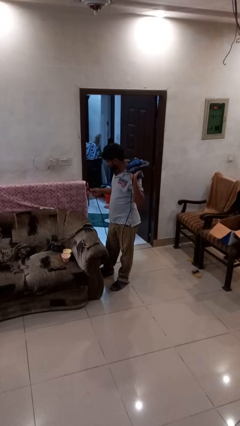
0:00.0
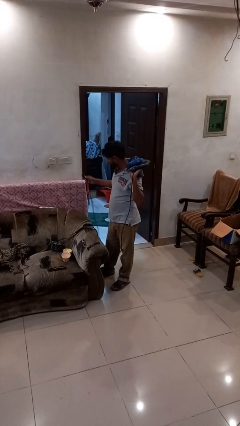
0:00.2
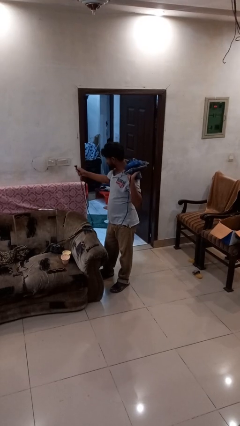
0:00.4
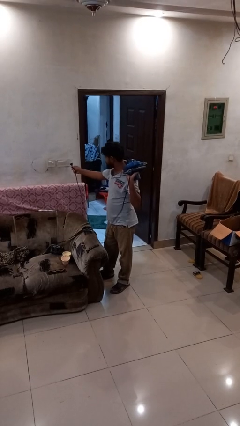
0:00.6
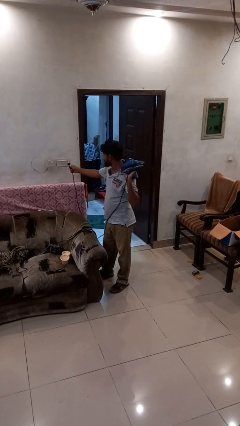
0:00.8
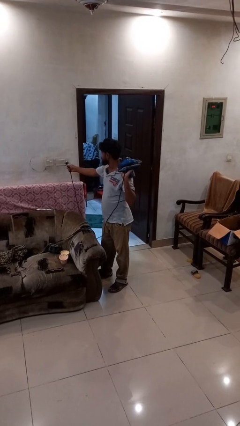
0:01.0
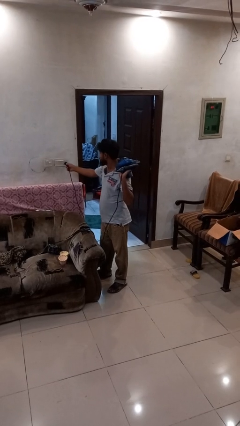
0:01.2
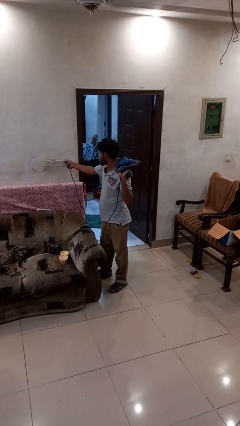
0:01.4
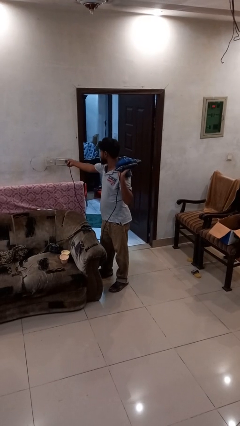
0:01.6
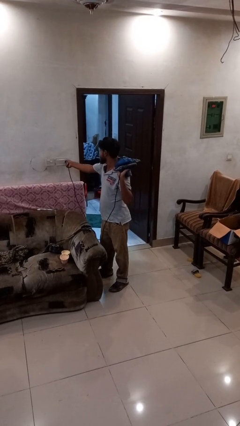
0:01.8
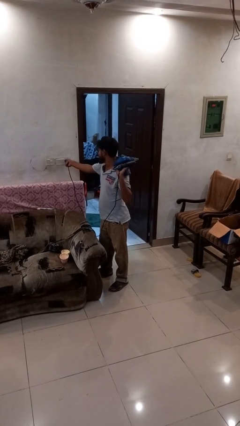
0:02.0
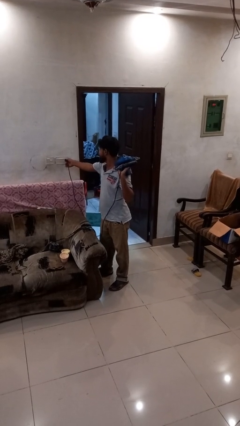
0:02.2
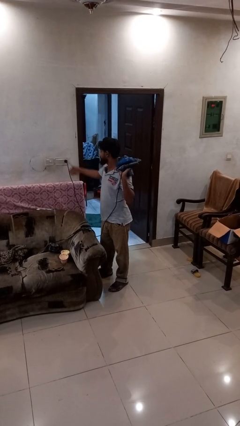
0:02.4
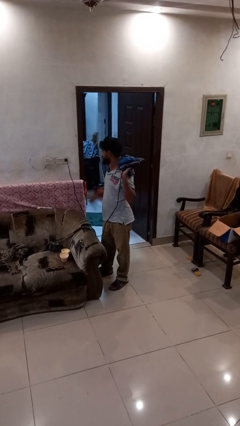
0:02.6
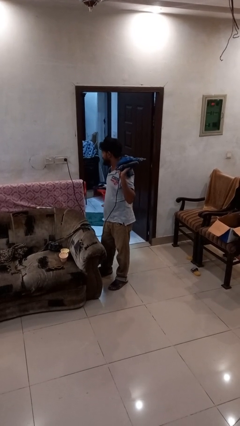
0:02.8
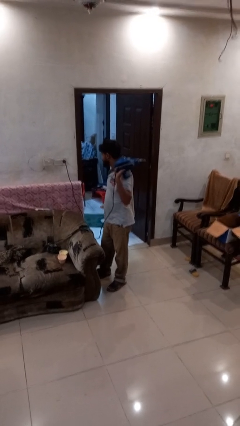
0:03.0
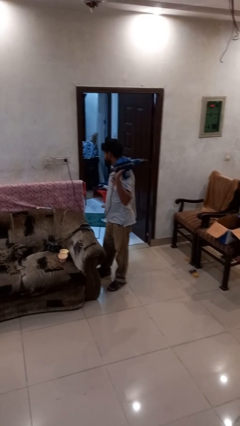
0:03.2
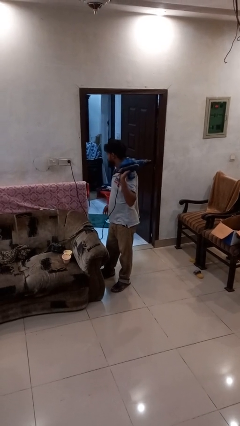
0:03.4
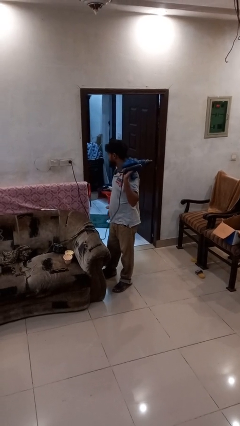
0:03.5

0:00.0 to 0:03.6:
person plugs into electrical socket

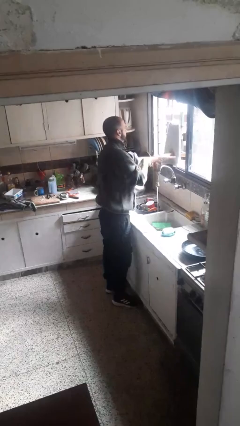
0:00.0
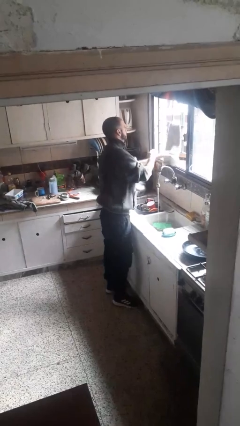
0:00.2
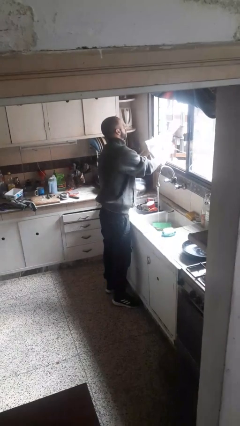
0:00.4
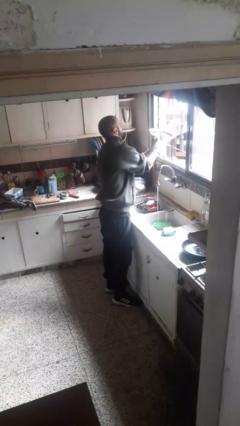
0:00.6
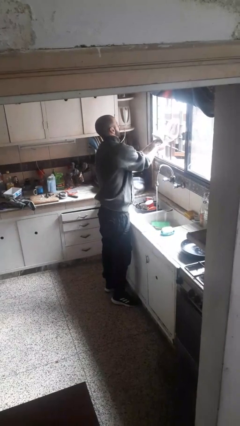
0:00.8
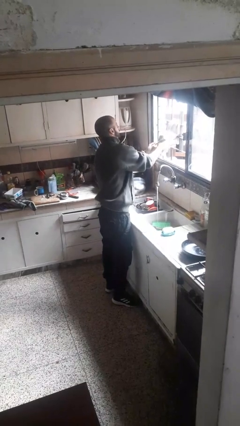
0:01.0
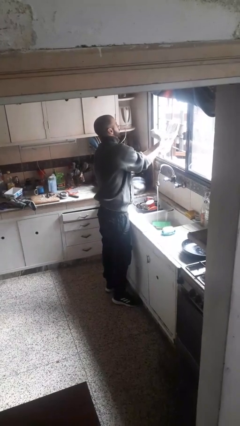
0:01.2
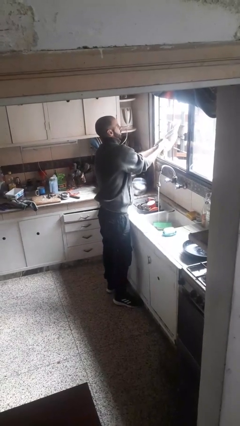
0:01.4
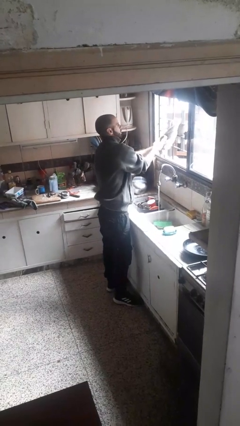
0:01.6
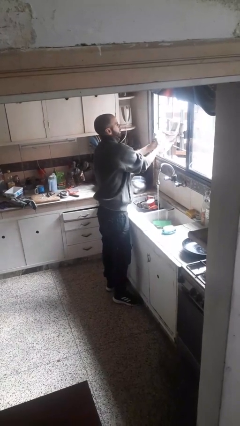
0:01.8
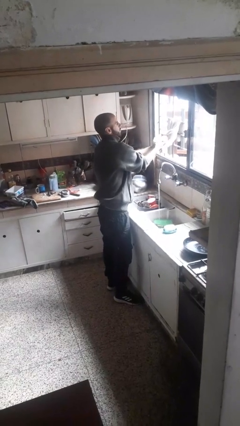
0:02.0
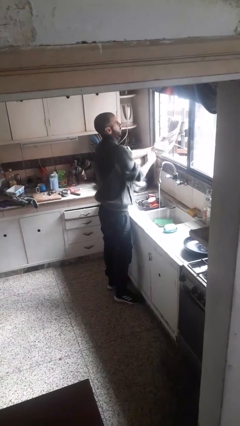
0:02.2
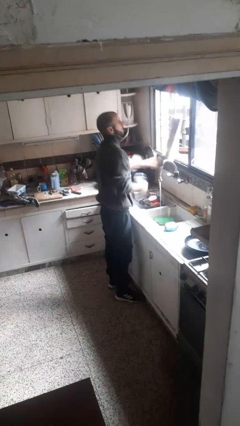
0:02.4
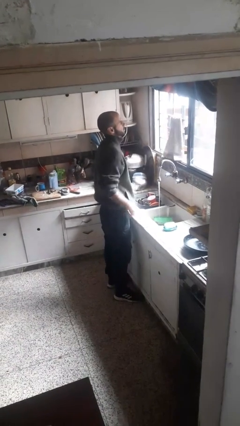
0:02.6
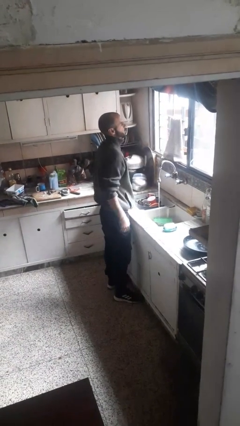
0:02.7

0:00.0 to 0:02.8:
person dries hands with towel

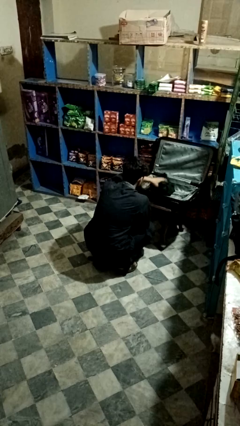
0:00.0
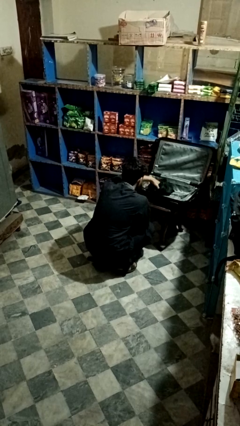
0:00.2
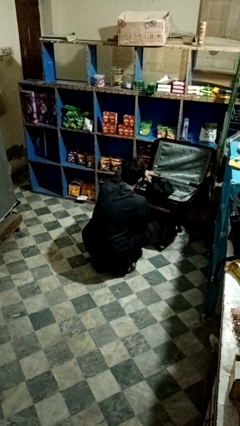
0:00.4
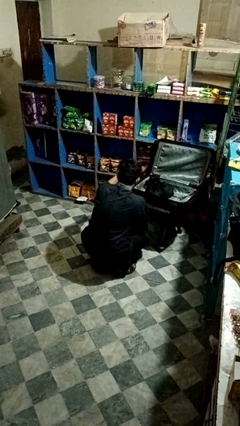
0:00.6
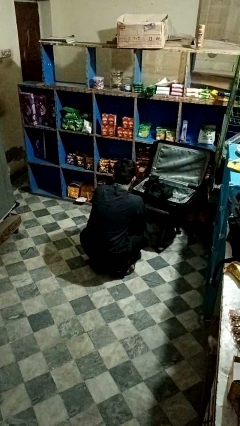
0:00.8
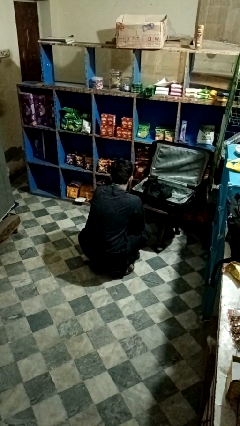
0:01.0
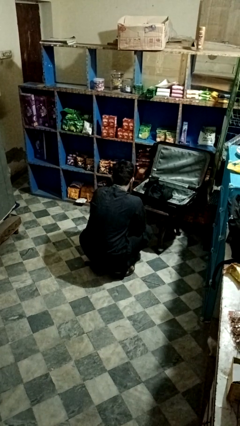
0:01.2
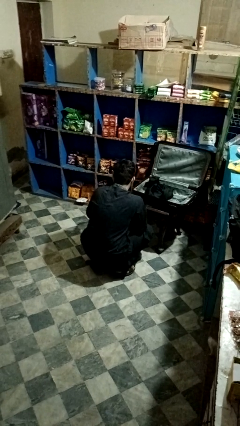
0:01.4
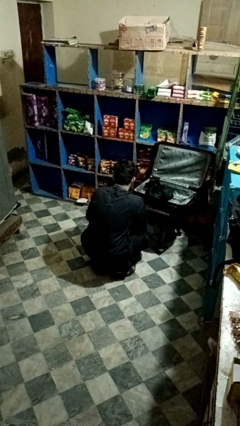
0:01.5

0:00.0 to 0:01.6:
person loads clothes into suitcase

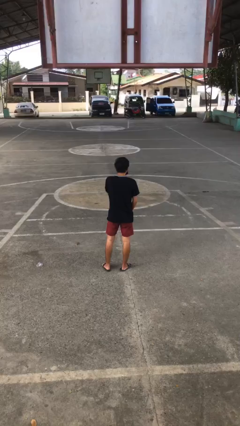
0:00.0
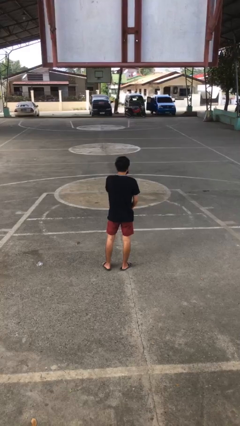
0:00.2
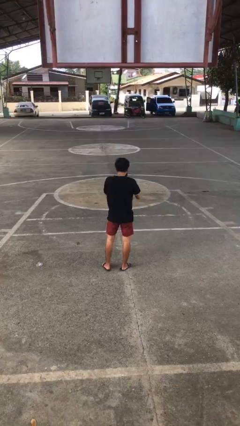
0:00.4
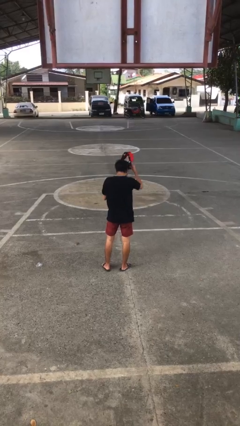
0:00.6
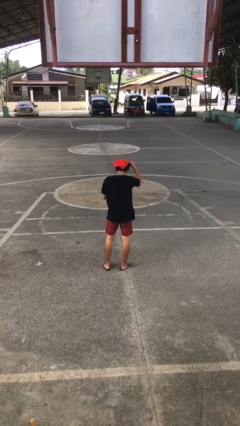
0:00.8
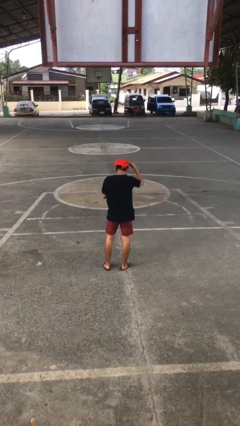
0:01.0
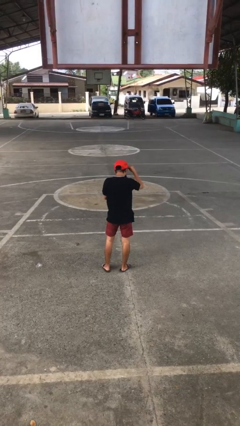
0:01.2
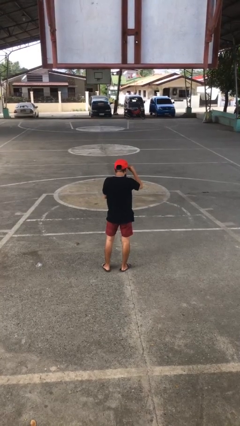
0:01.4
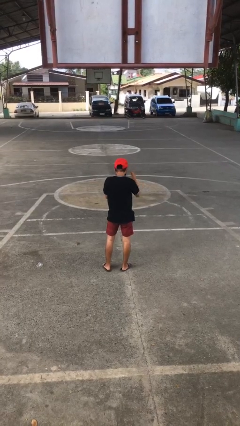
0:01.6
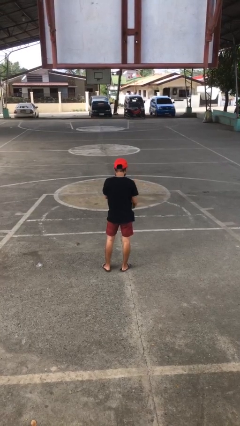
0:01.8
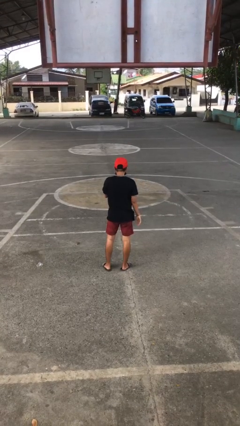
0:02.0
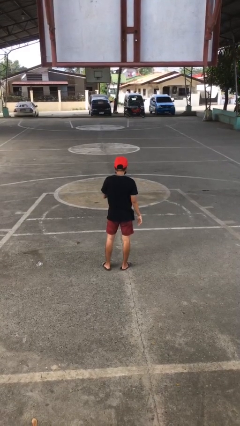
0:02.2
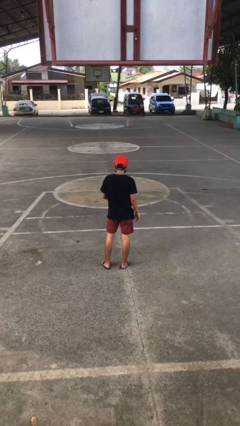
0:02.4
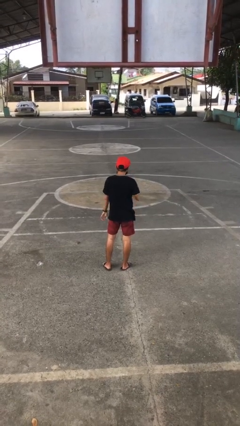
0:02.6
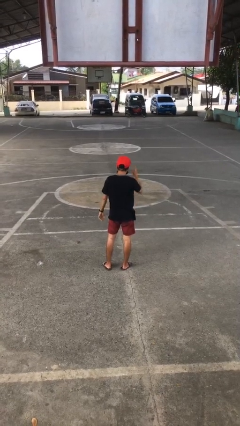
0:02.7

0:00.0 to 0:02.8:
person puts on hat

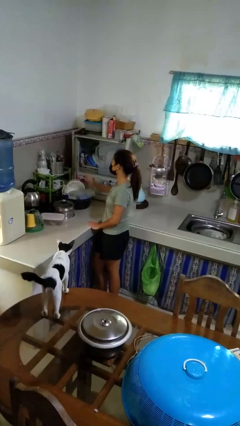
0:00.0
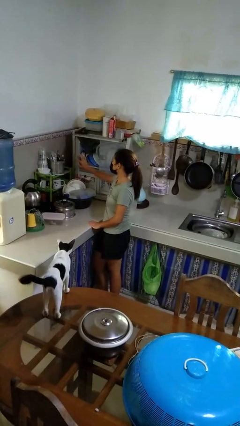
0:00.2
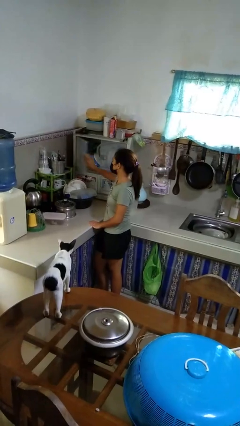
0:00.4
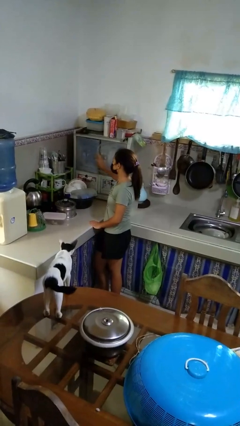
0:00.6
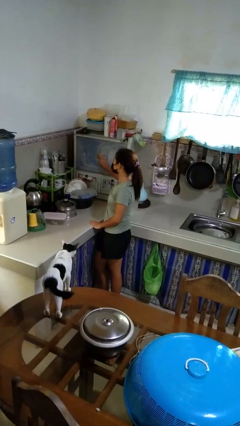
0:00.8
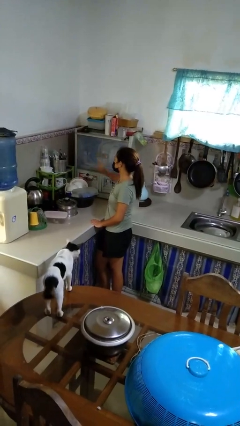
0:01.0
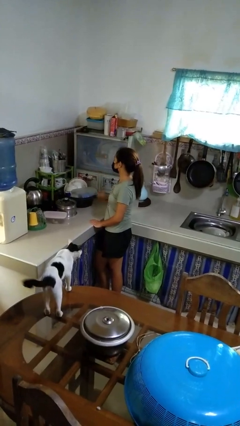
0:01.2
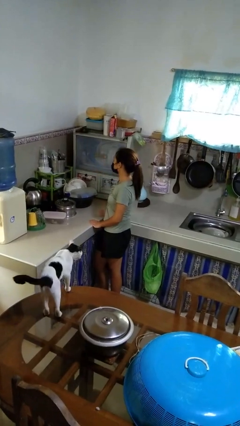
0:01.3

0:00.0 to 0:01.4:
person closes kitchen drawer

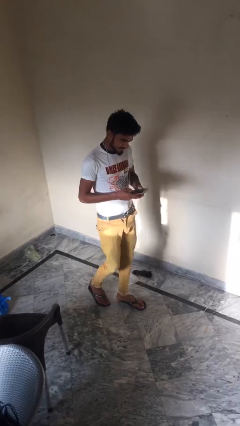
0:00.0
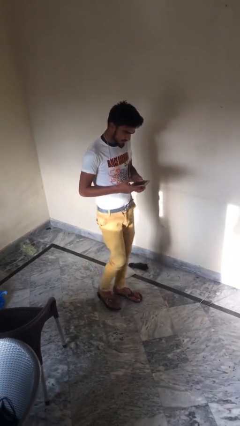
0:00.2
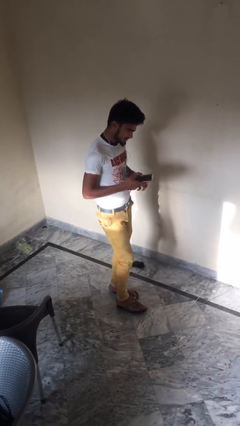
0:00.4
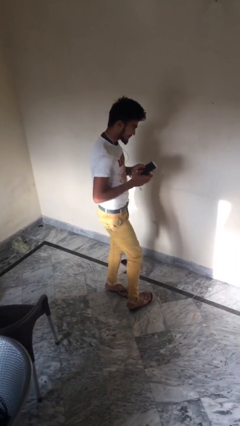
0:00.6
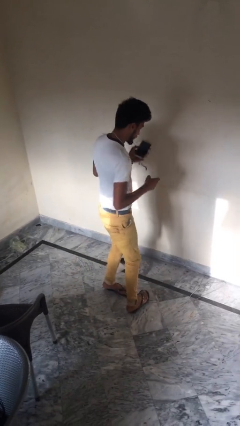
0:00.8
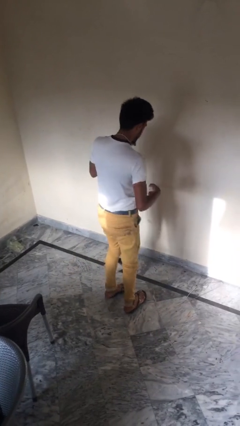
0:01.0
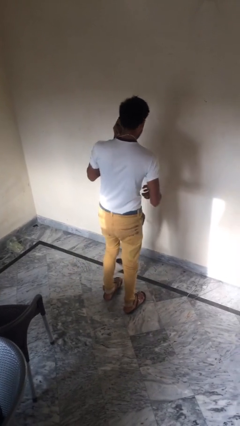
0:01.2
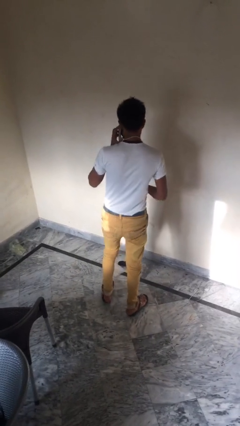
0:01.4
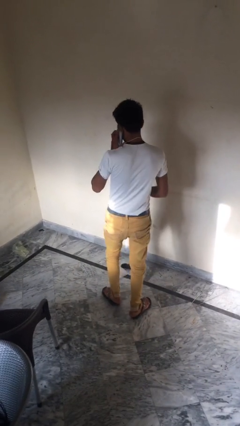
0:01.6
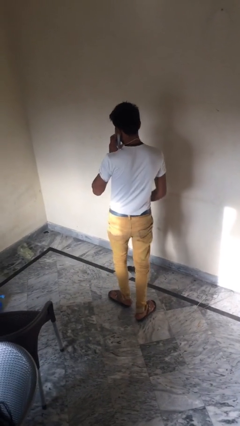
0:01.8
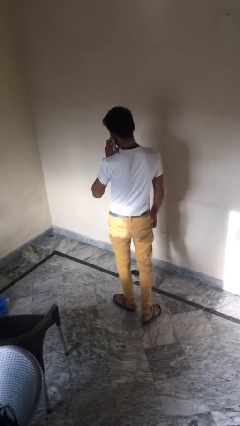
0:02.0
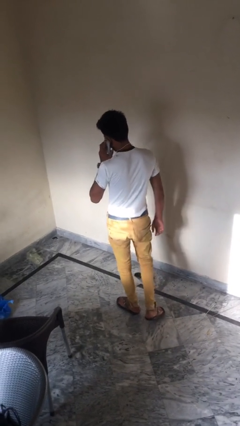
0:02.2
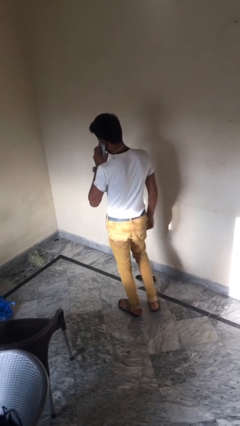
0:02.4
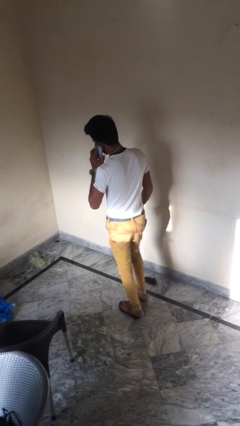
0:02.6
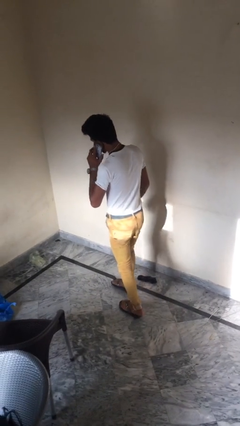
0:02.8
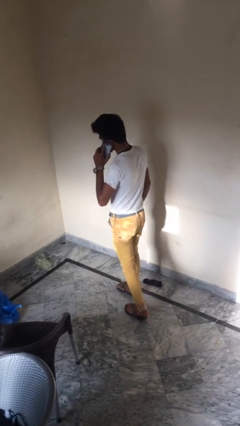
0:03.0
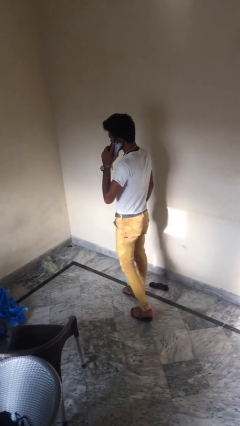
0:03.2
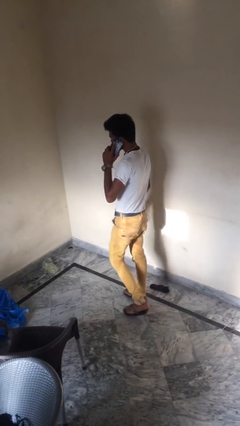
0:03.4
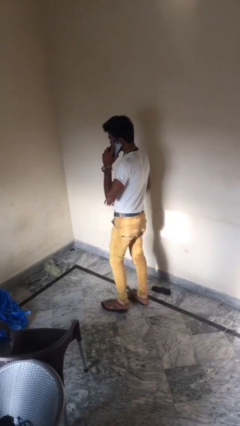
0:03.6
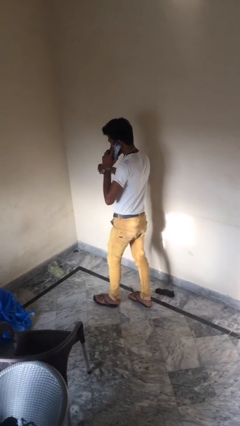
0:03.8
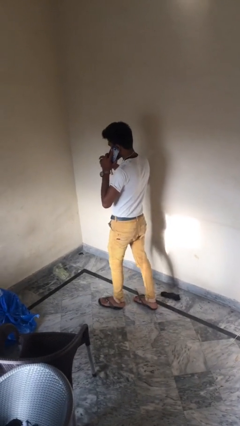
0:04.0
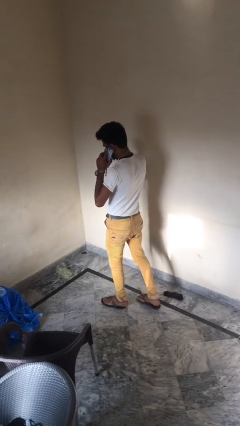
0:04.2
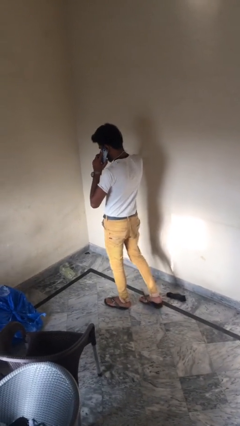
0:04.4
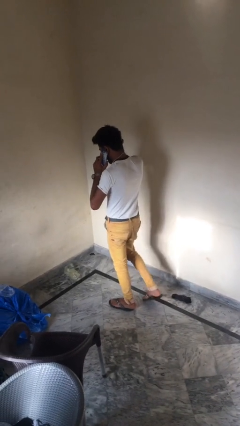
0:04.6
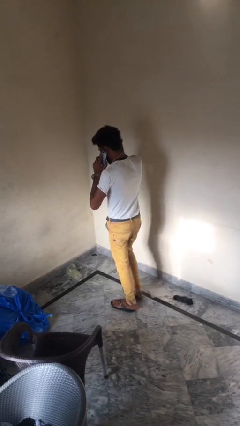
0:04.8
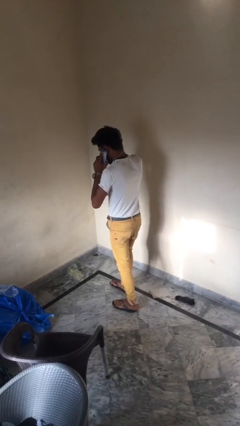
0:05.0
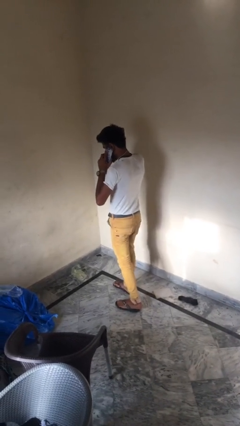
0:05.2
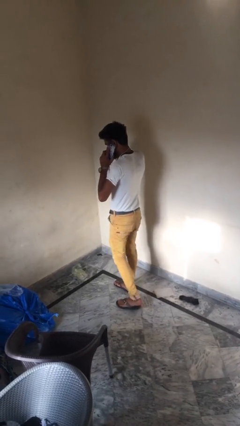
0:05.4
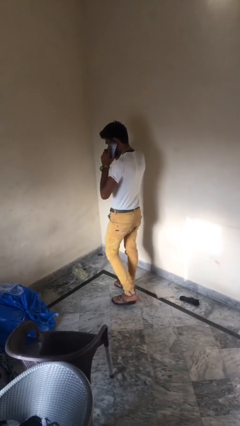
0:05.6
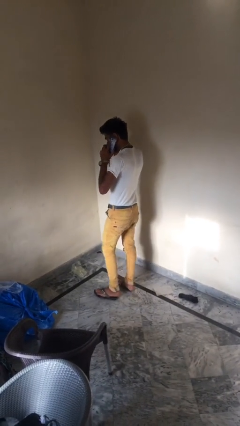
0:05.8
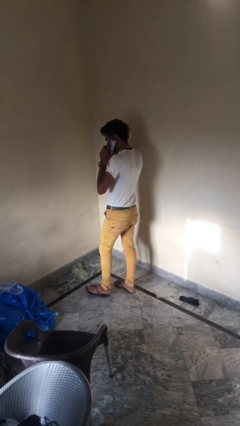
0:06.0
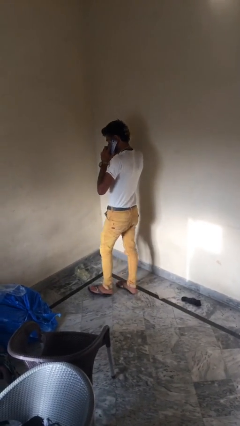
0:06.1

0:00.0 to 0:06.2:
person talks on phone
